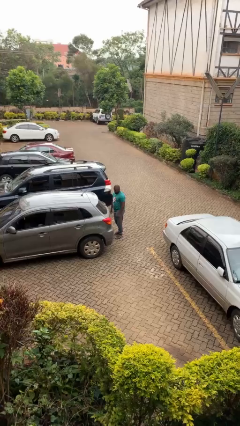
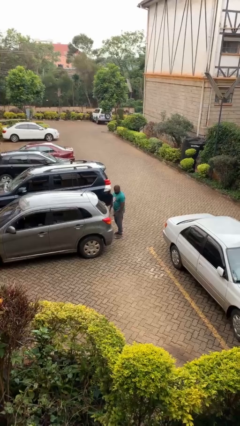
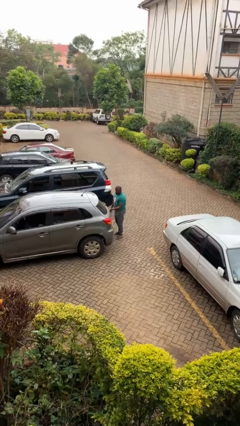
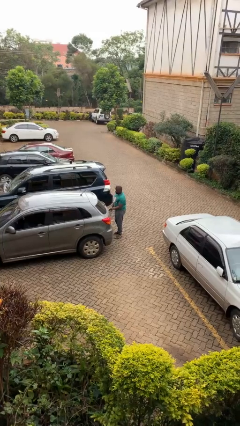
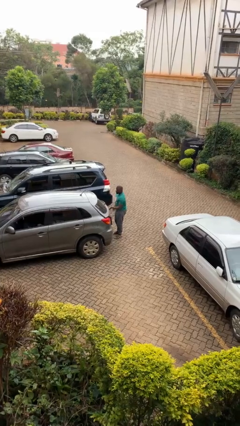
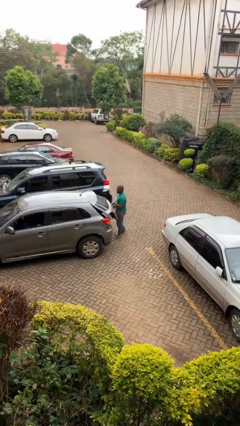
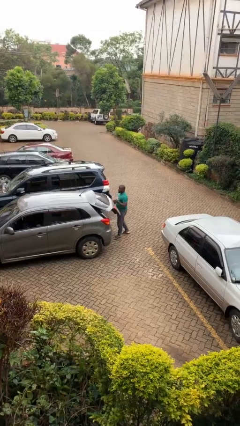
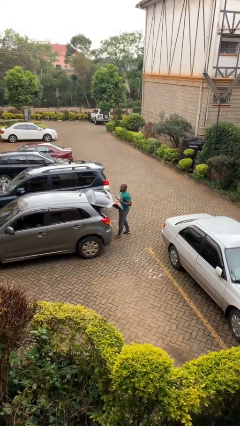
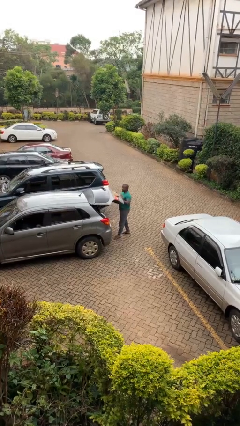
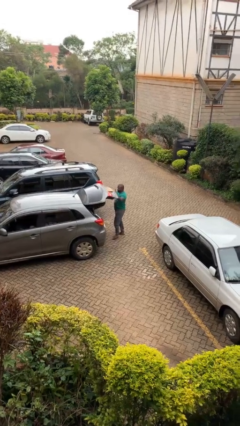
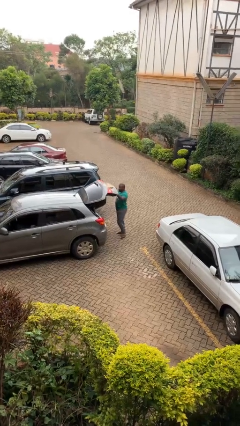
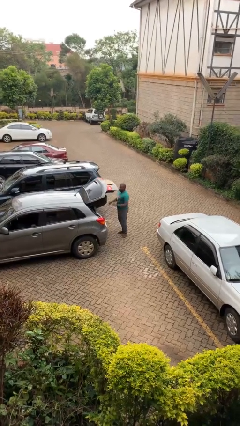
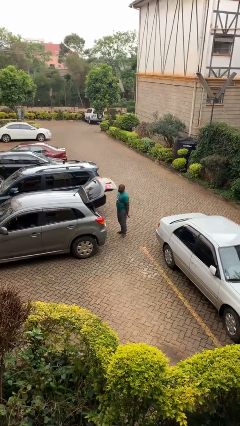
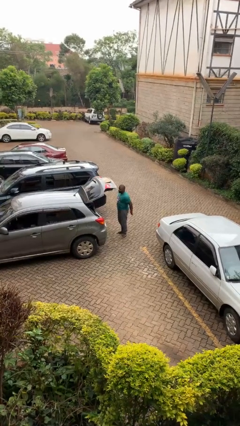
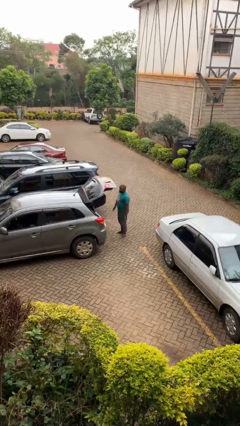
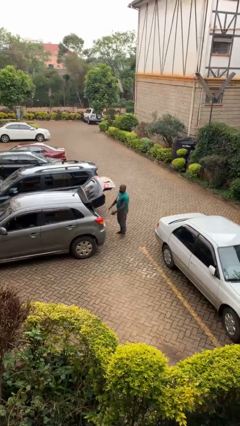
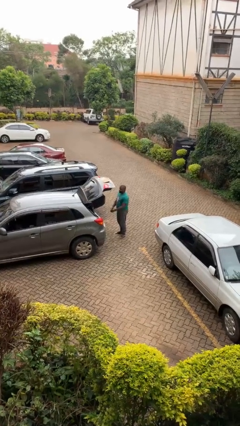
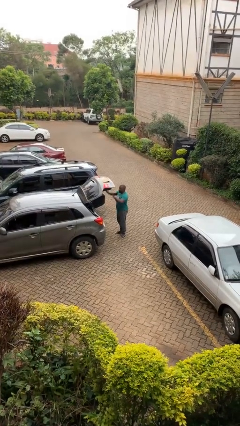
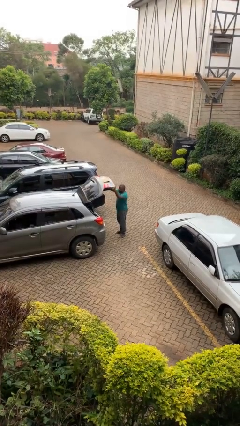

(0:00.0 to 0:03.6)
person opens car trunk

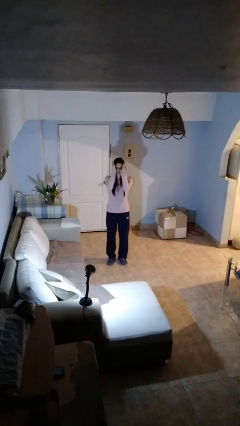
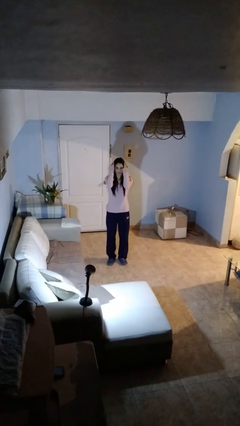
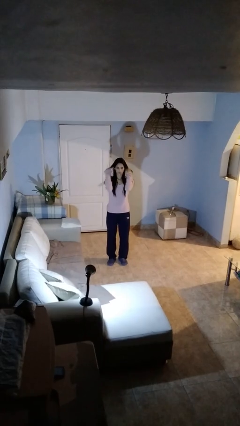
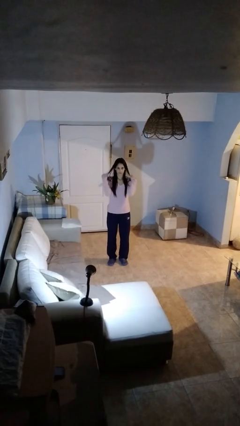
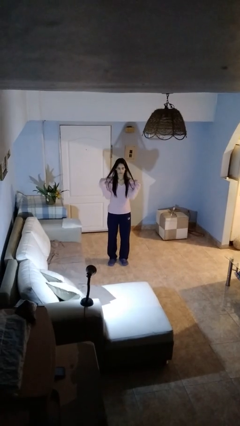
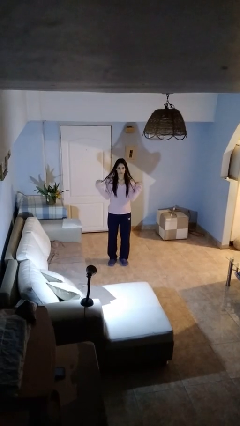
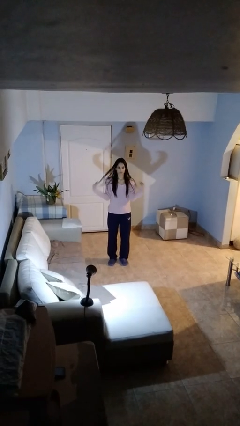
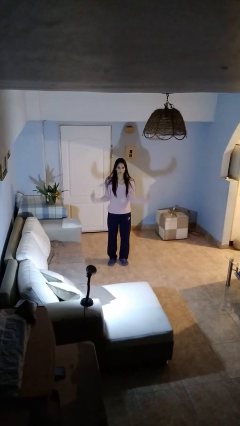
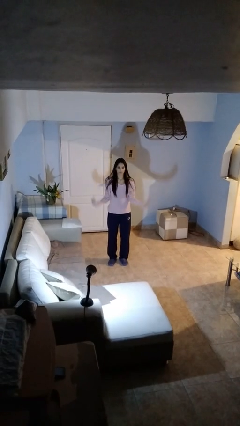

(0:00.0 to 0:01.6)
person strokes hair

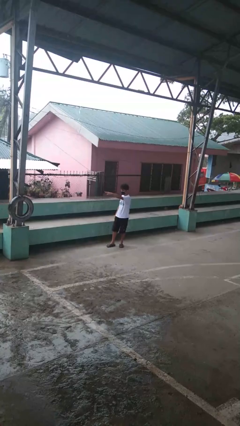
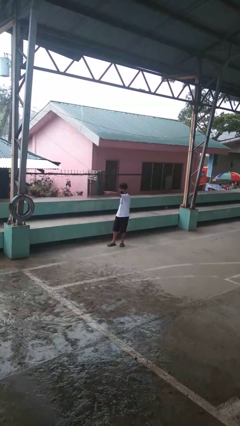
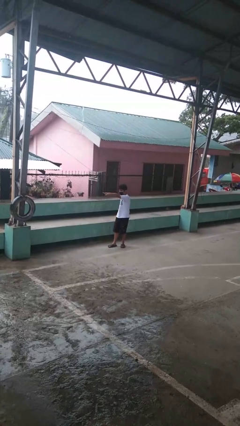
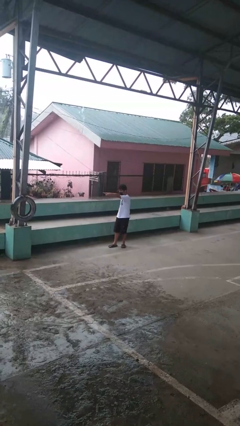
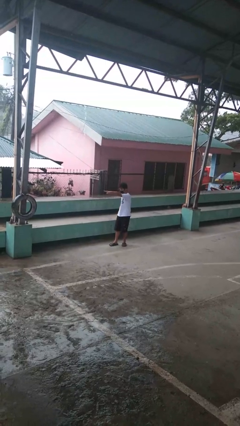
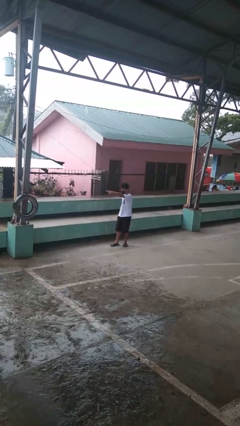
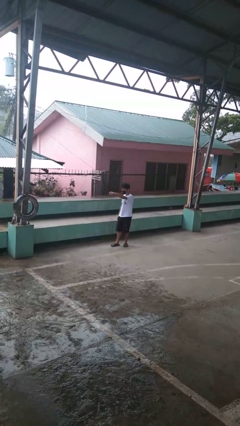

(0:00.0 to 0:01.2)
person gestures watch closely

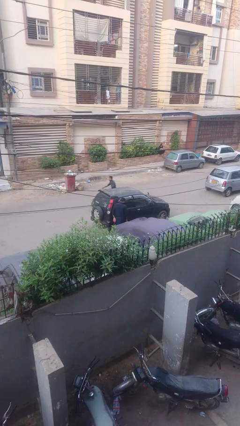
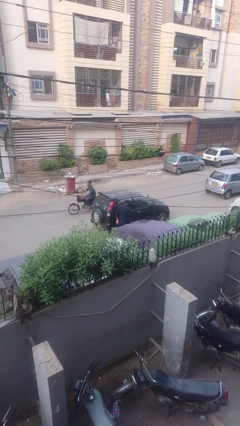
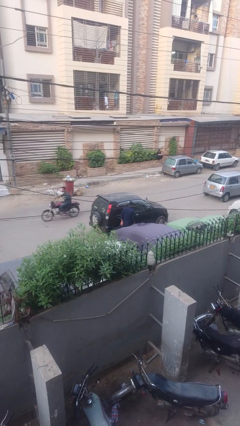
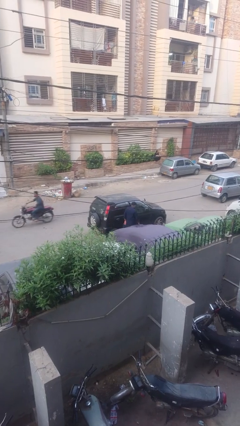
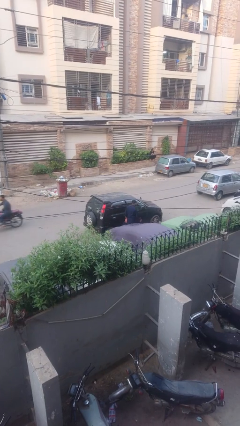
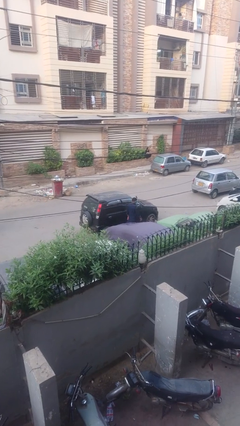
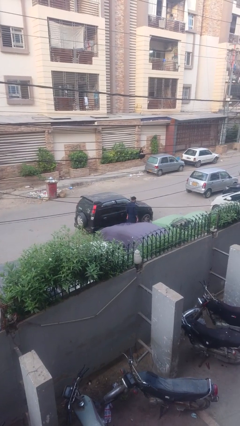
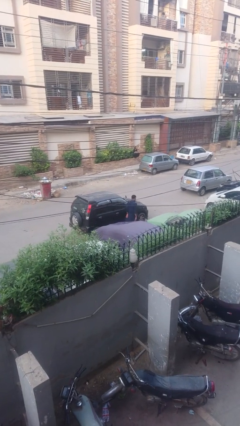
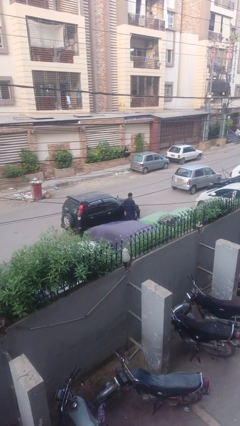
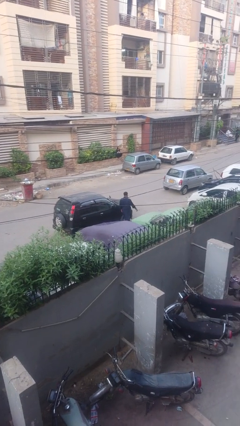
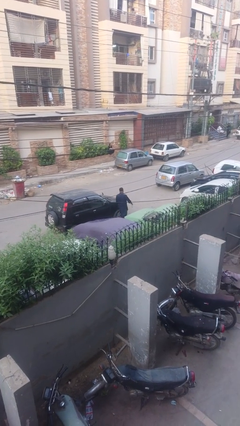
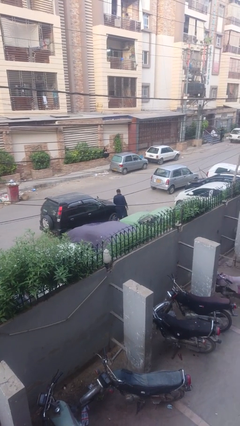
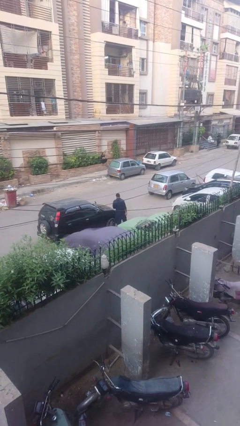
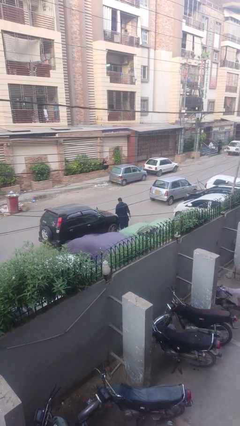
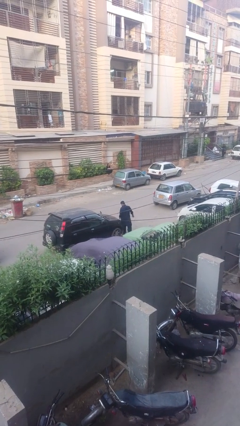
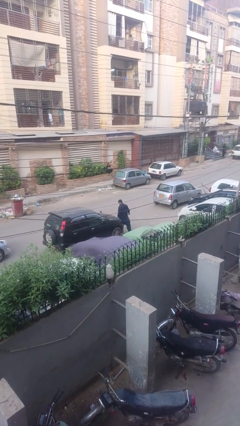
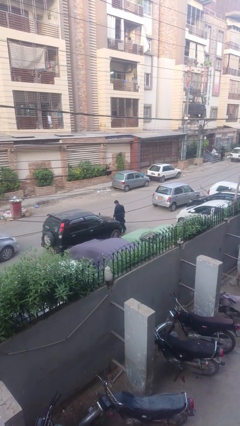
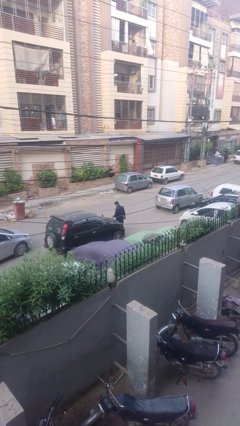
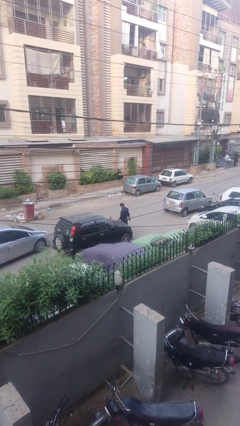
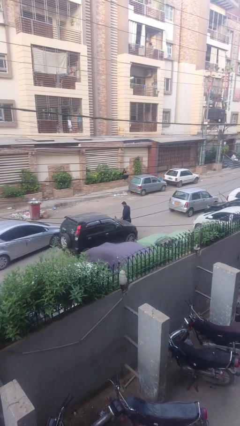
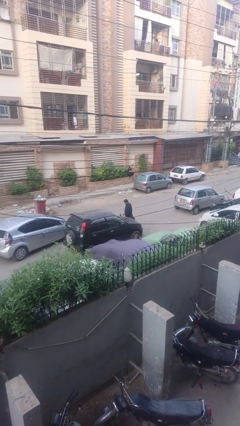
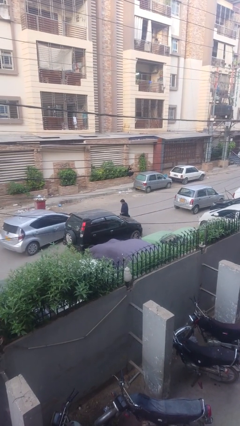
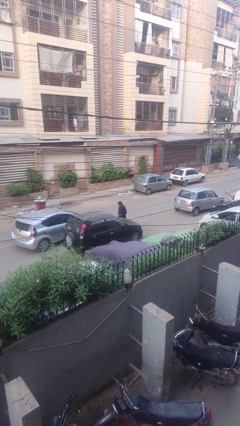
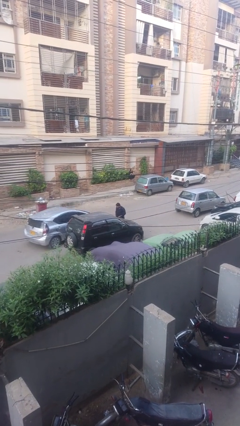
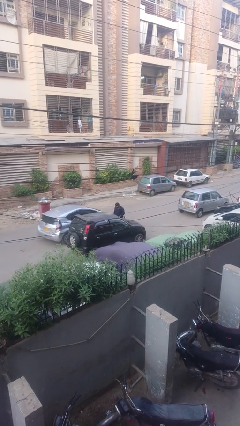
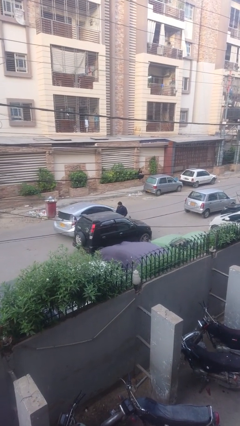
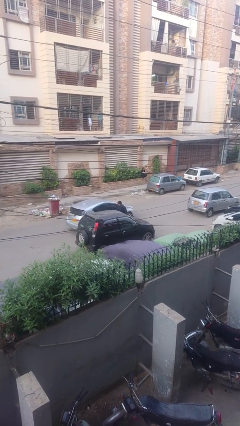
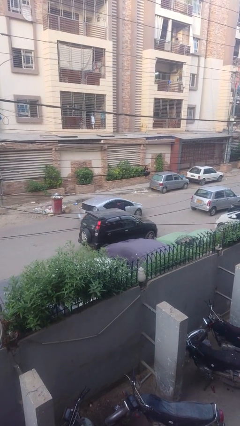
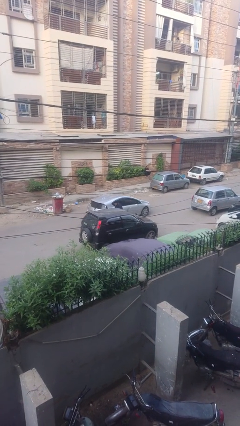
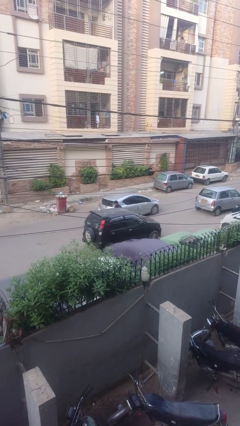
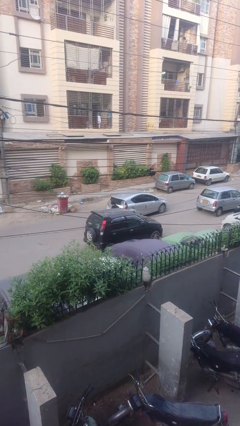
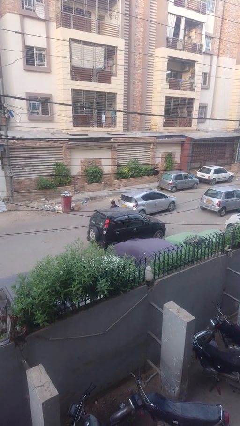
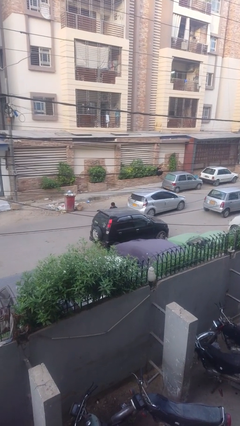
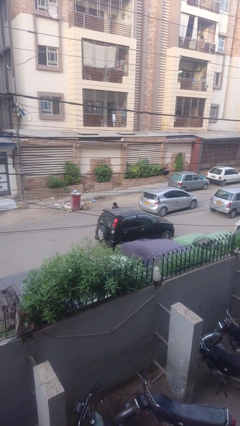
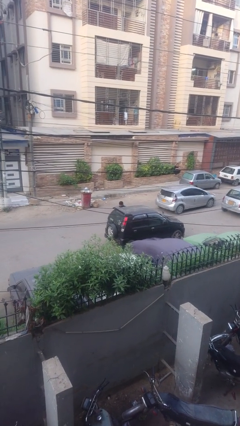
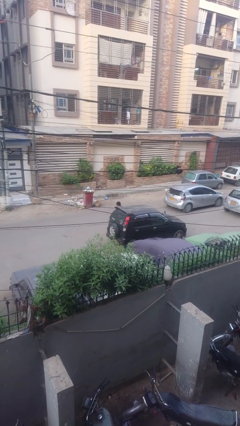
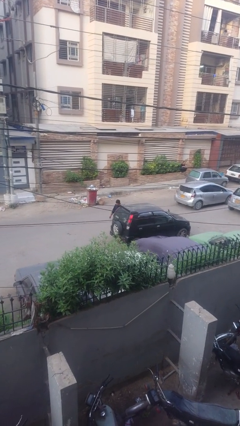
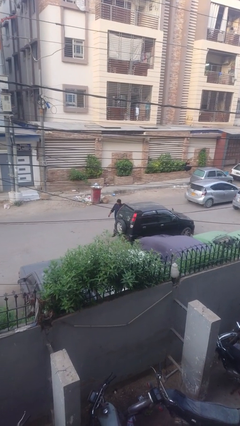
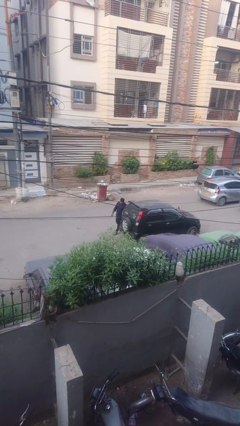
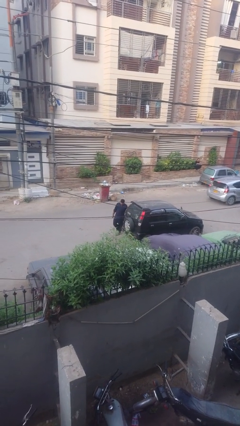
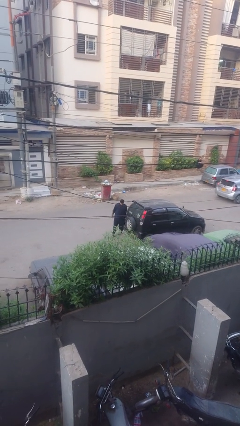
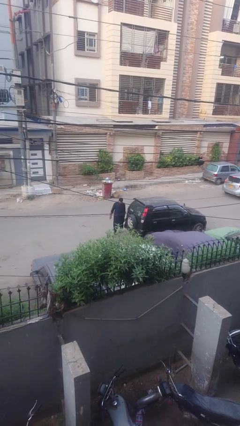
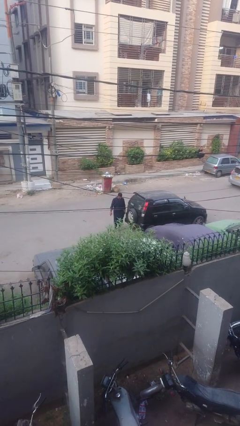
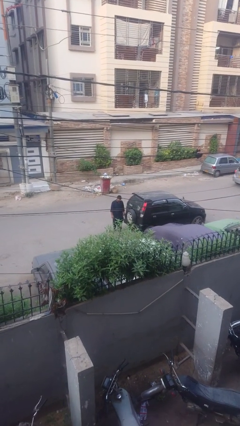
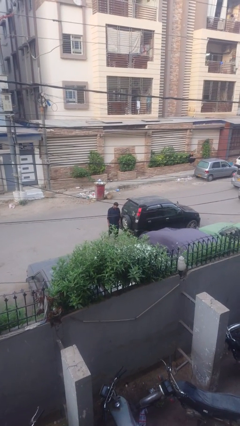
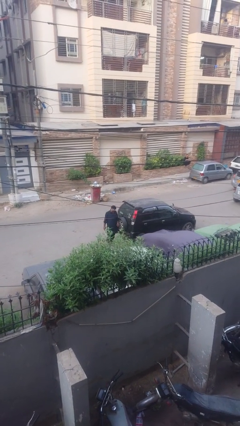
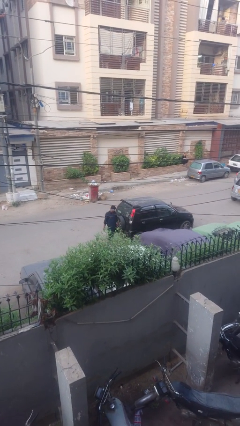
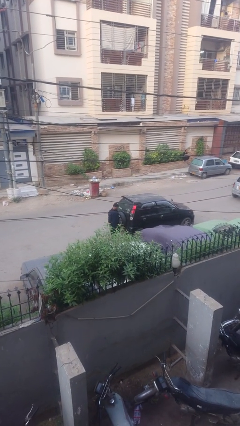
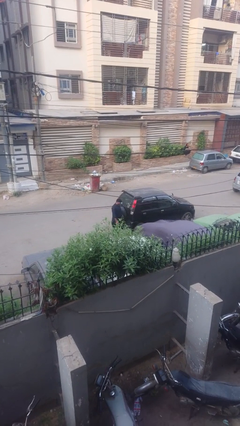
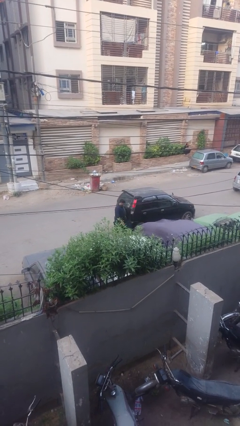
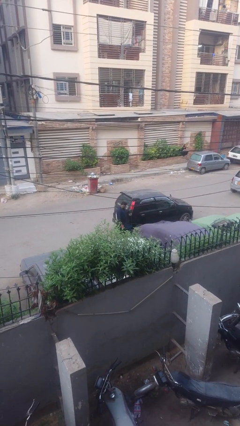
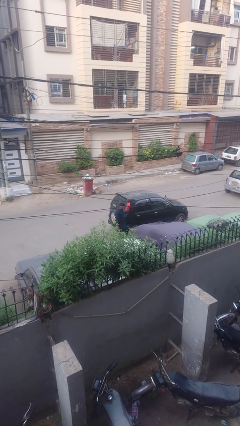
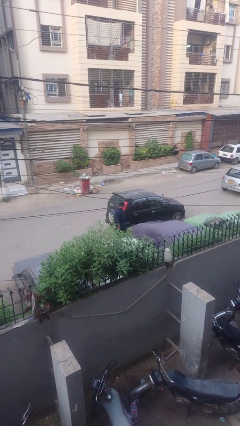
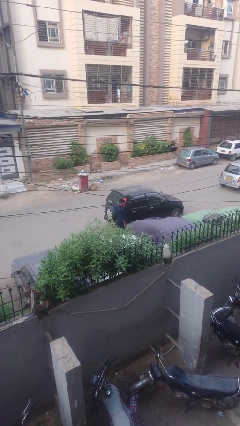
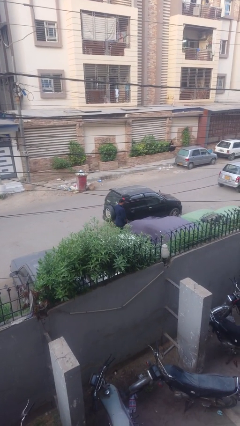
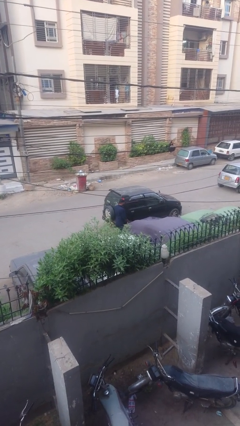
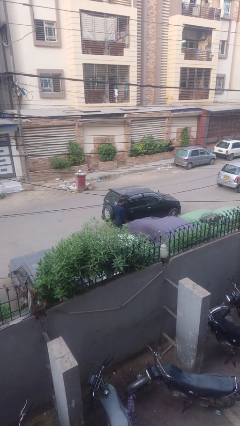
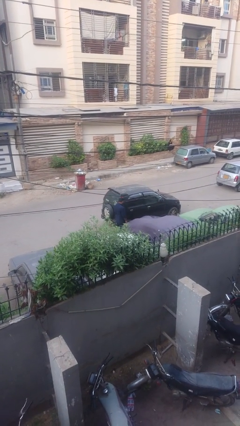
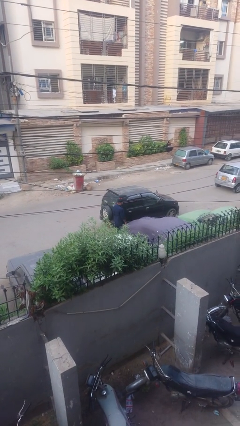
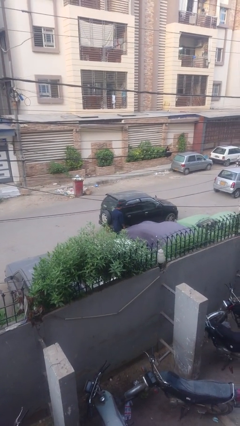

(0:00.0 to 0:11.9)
person walks around car
